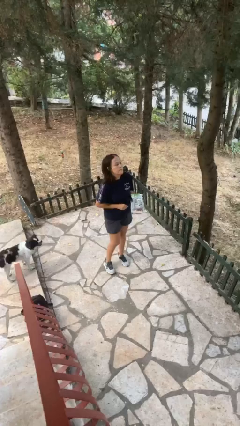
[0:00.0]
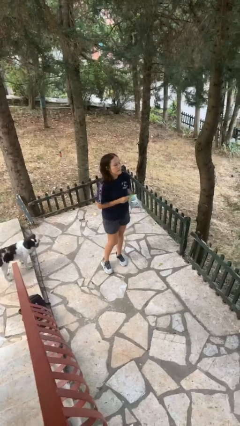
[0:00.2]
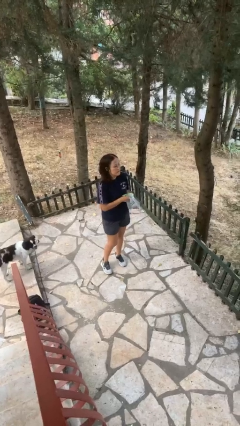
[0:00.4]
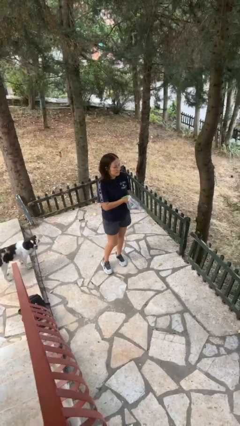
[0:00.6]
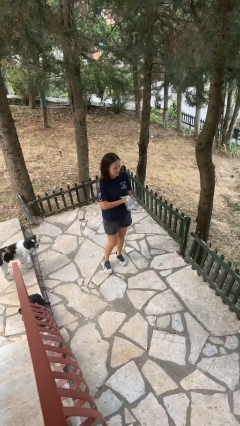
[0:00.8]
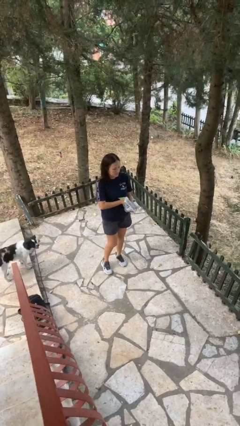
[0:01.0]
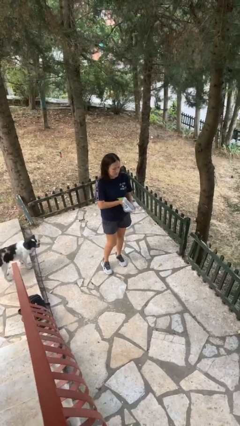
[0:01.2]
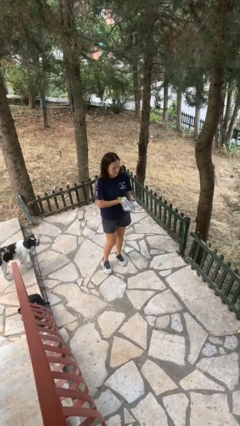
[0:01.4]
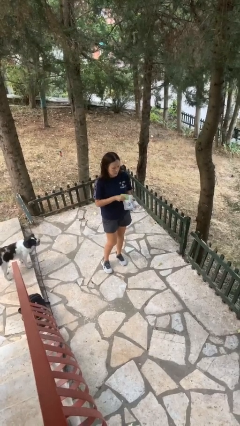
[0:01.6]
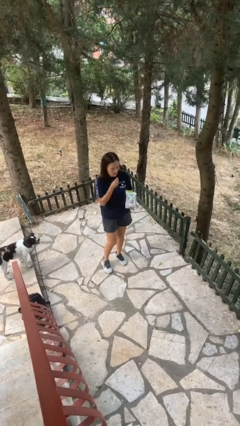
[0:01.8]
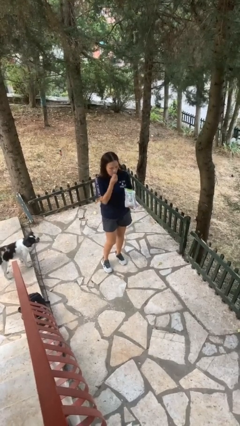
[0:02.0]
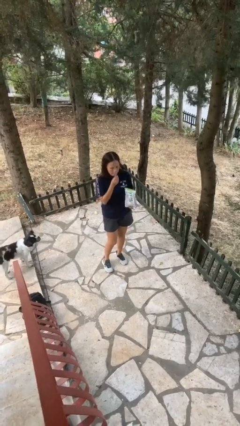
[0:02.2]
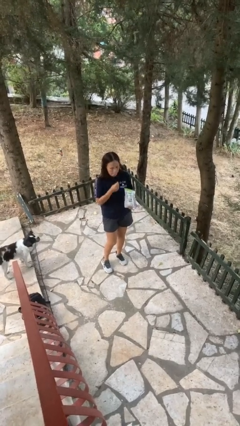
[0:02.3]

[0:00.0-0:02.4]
person eats snack from bag

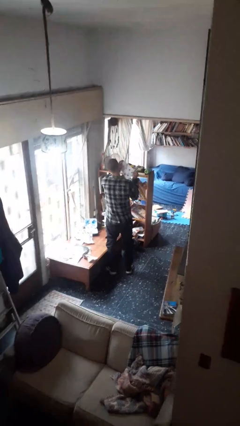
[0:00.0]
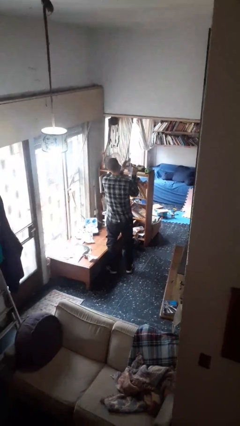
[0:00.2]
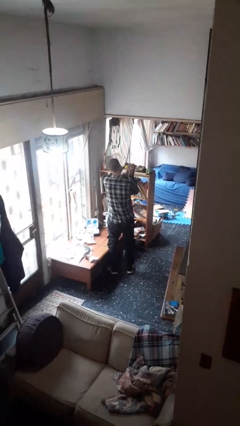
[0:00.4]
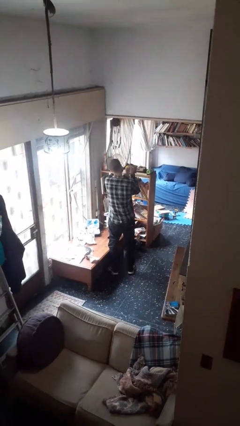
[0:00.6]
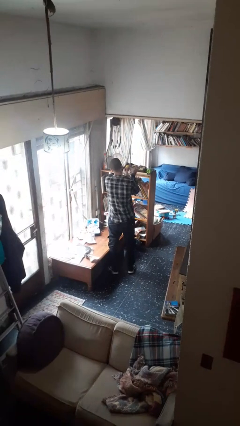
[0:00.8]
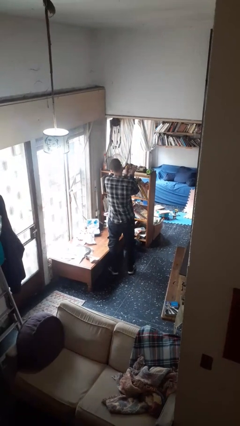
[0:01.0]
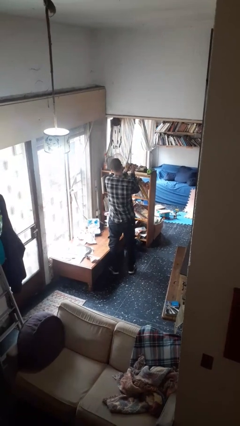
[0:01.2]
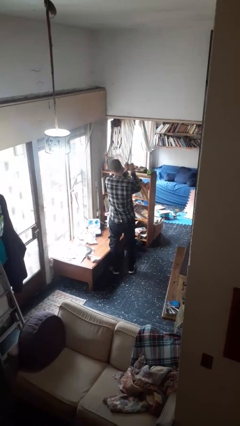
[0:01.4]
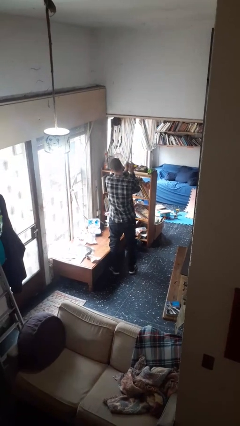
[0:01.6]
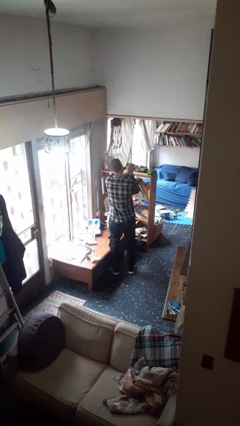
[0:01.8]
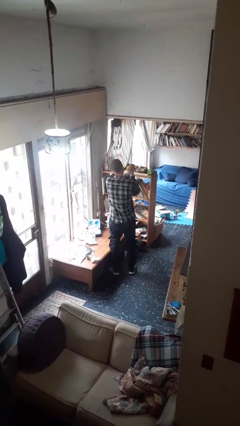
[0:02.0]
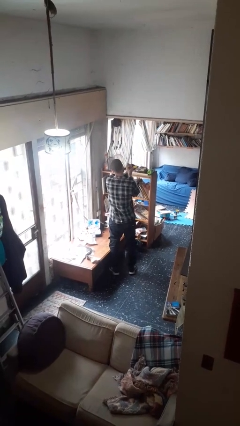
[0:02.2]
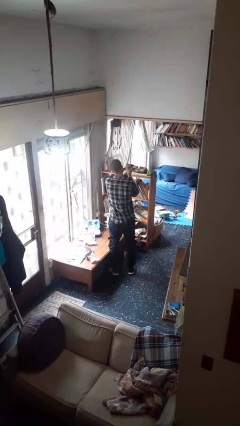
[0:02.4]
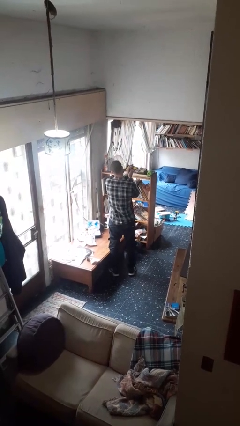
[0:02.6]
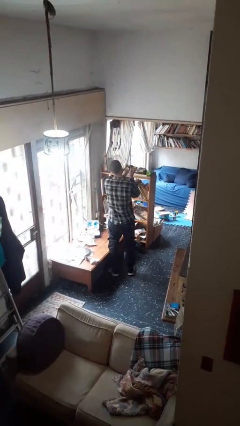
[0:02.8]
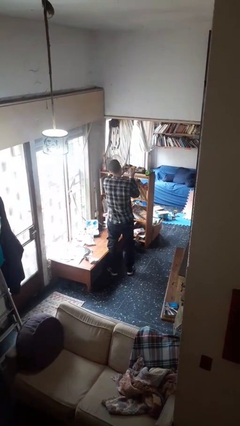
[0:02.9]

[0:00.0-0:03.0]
person crumples paper

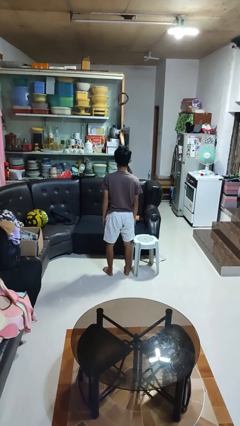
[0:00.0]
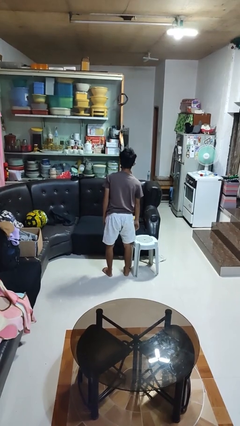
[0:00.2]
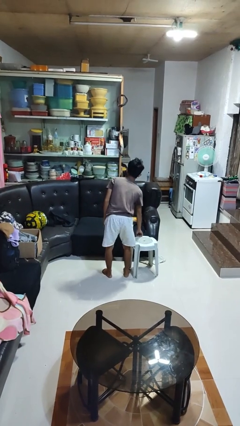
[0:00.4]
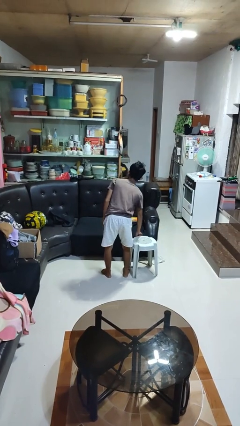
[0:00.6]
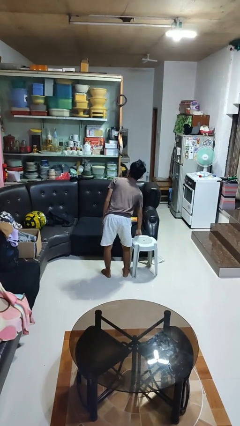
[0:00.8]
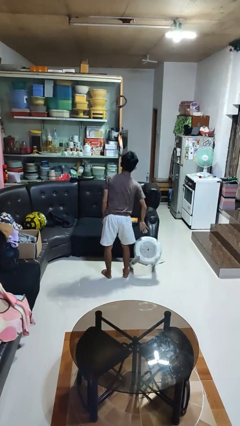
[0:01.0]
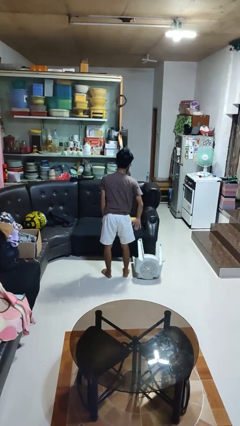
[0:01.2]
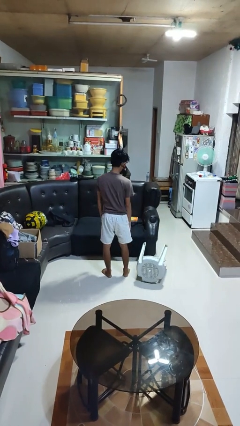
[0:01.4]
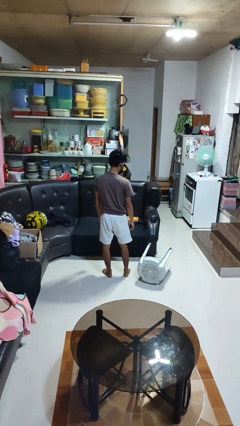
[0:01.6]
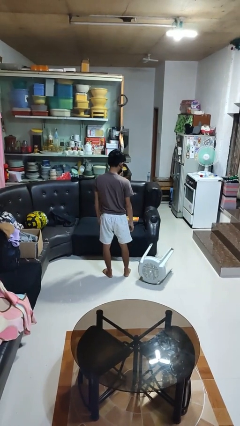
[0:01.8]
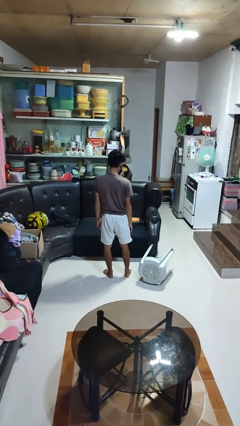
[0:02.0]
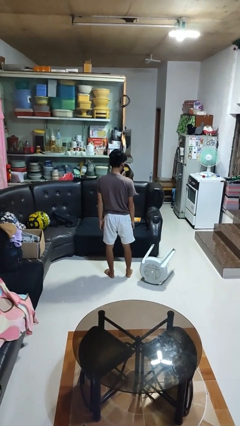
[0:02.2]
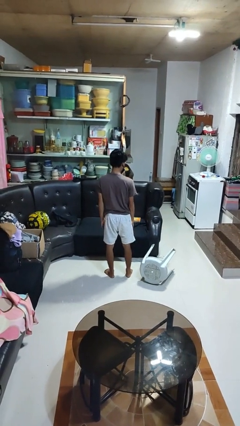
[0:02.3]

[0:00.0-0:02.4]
person knocks over furniture

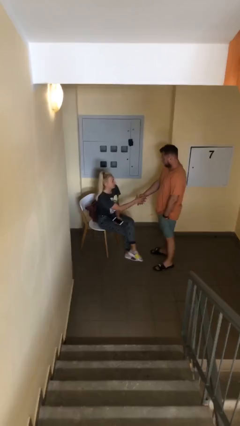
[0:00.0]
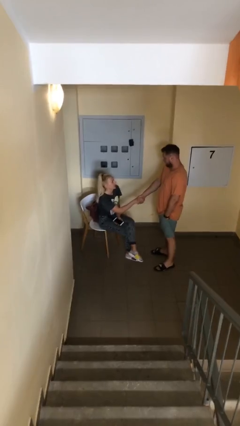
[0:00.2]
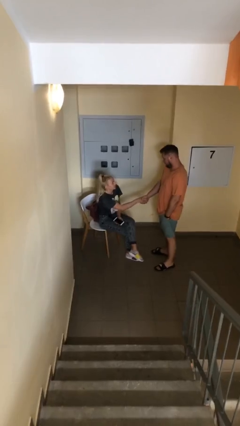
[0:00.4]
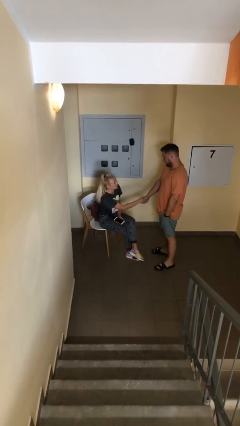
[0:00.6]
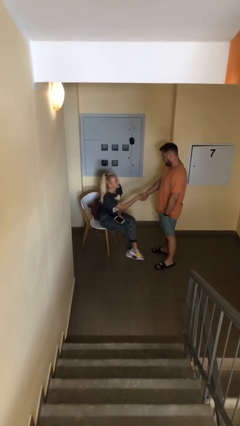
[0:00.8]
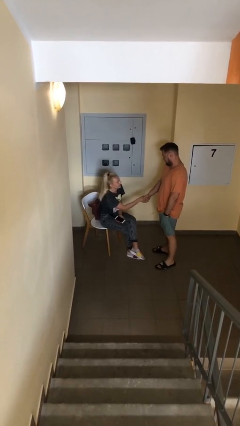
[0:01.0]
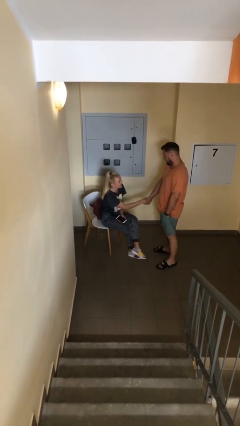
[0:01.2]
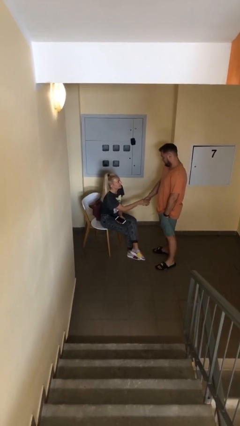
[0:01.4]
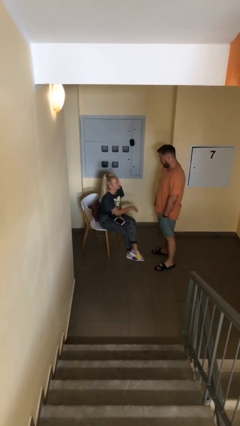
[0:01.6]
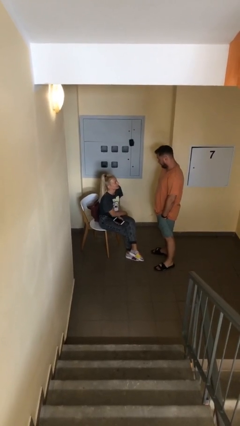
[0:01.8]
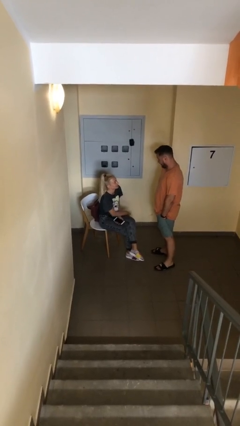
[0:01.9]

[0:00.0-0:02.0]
person shakes hand

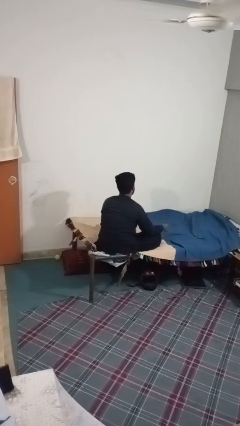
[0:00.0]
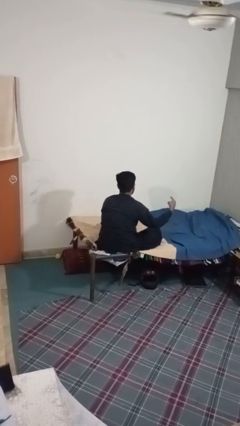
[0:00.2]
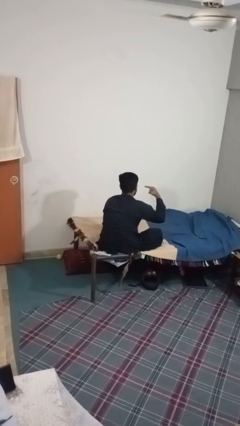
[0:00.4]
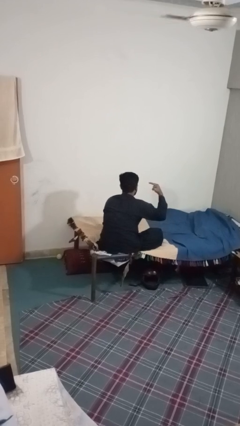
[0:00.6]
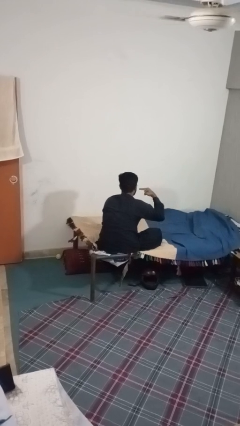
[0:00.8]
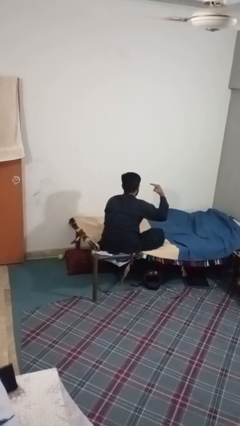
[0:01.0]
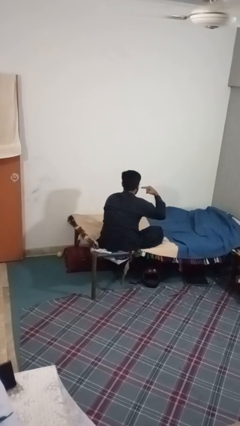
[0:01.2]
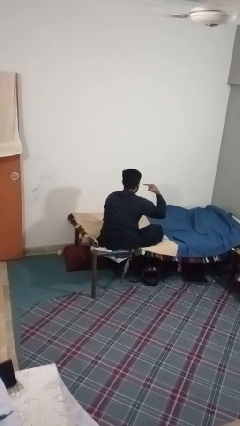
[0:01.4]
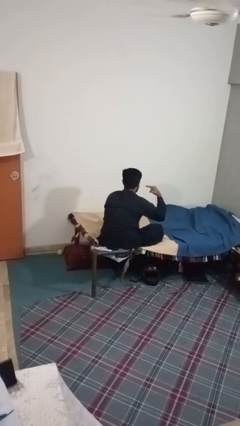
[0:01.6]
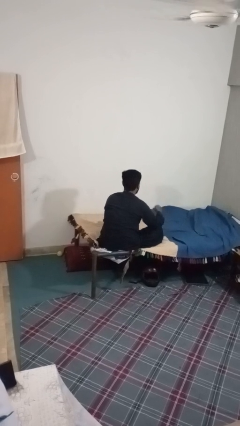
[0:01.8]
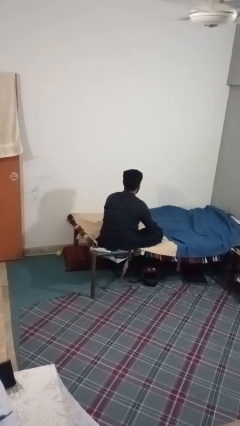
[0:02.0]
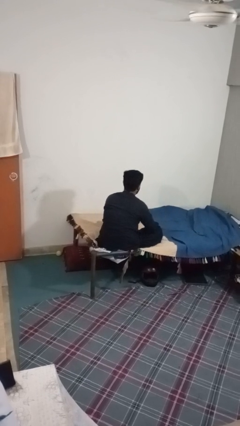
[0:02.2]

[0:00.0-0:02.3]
person gestures listen closely

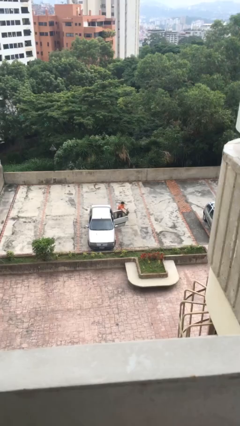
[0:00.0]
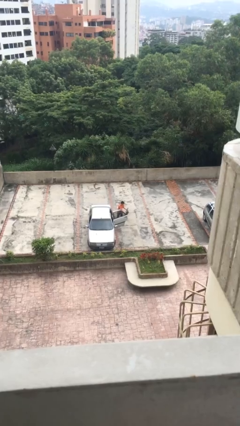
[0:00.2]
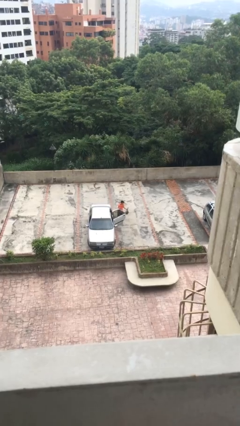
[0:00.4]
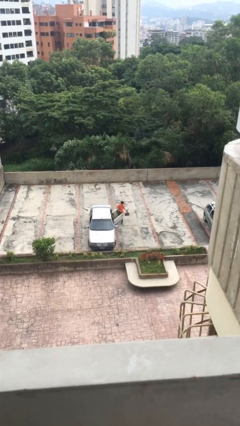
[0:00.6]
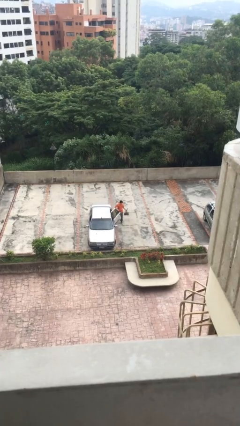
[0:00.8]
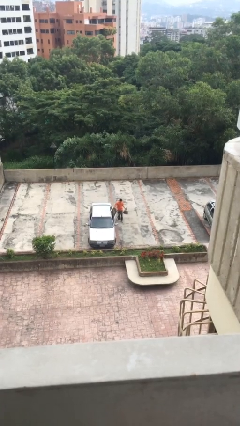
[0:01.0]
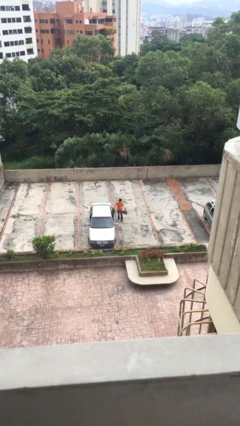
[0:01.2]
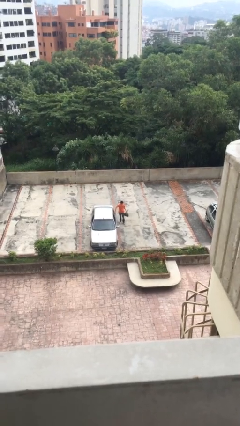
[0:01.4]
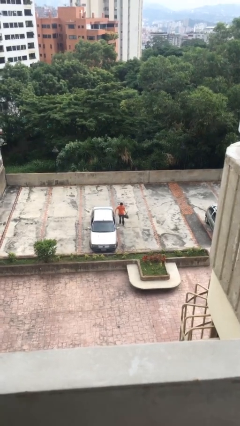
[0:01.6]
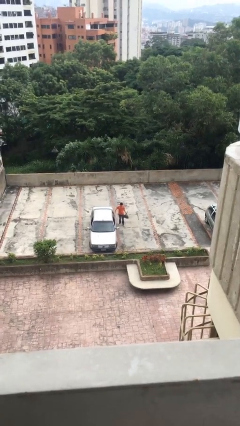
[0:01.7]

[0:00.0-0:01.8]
person closes car door

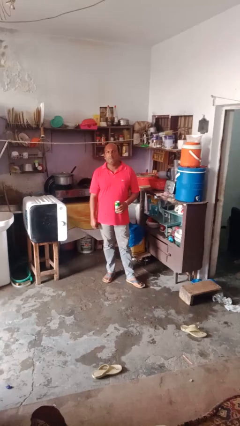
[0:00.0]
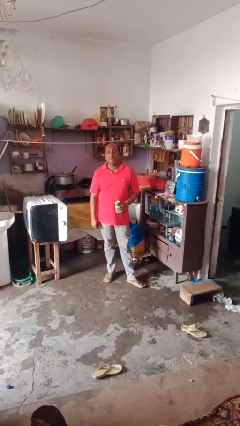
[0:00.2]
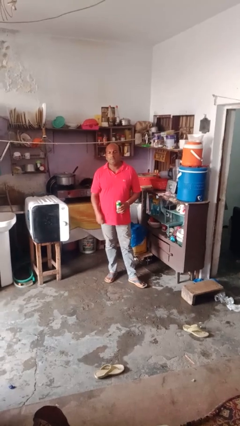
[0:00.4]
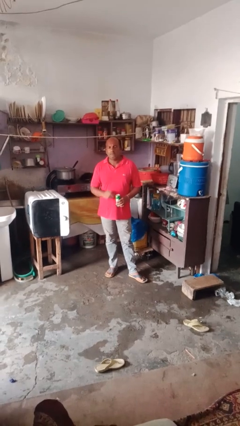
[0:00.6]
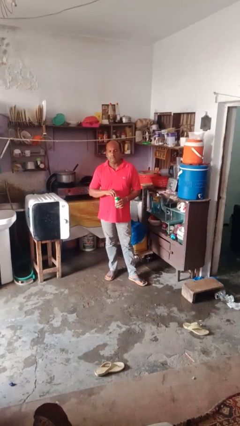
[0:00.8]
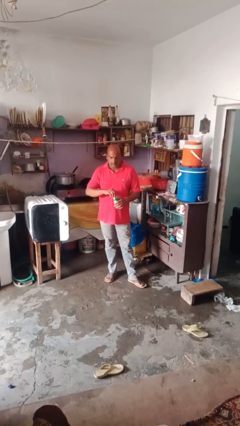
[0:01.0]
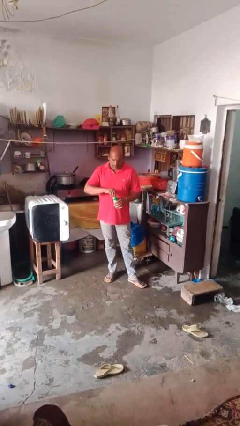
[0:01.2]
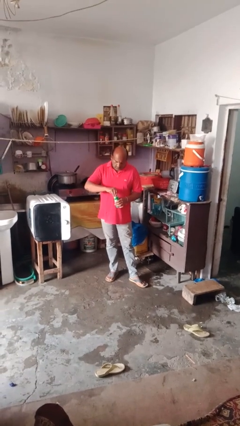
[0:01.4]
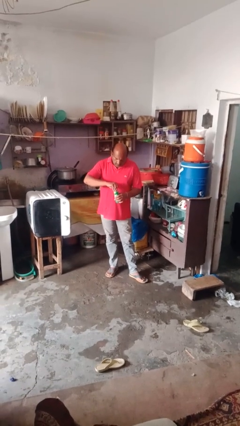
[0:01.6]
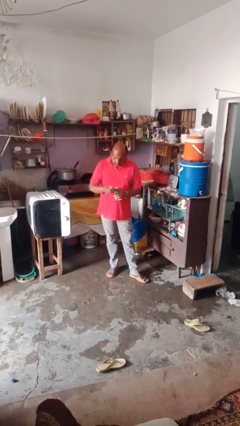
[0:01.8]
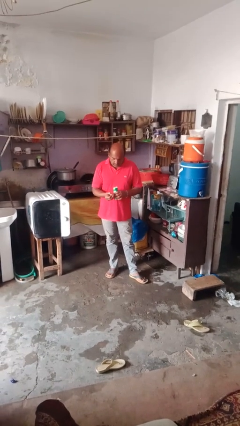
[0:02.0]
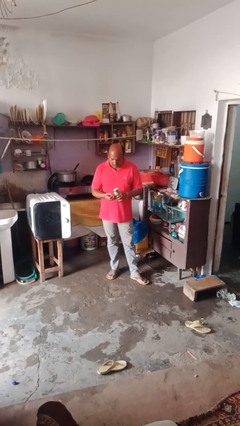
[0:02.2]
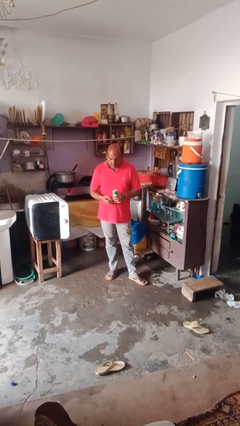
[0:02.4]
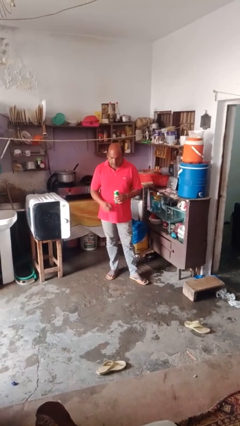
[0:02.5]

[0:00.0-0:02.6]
person opens beverage can

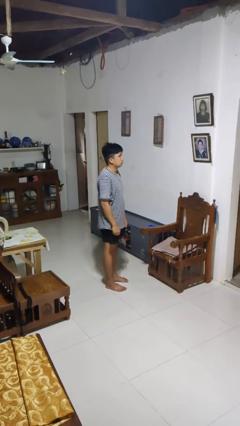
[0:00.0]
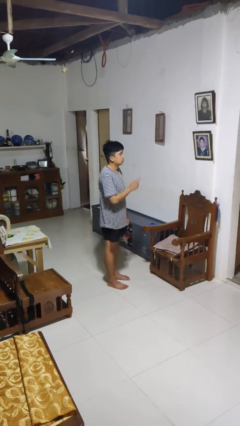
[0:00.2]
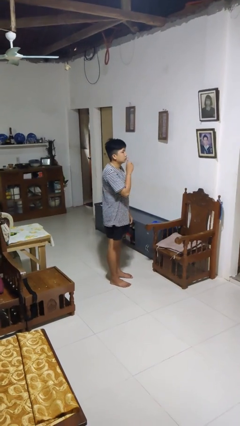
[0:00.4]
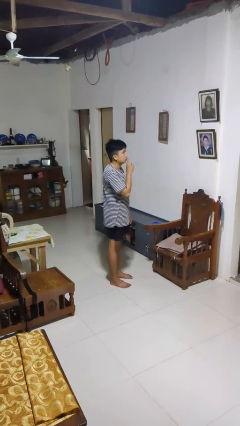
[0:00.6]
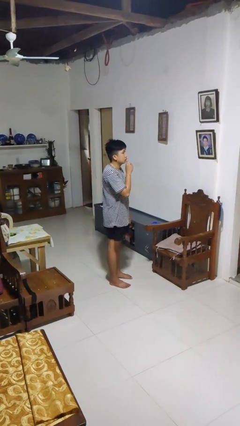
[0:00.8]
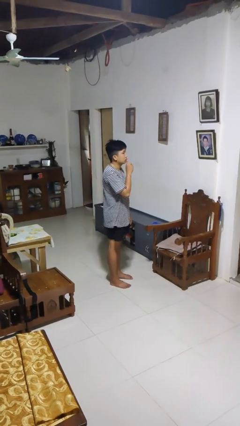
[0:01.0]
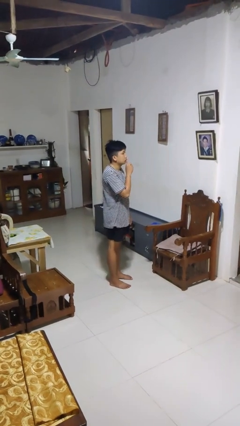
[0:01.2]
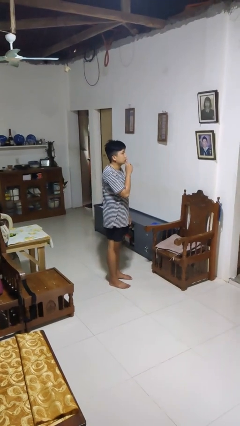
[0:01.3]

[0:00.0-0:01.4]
person gestures be quiet
